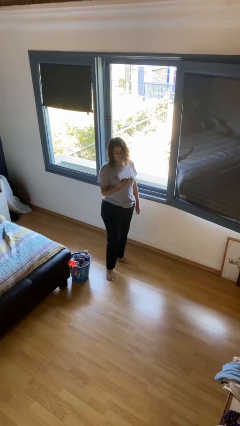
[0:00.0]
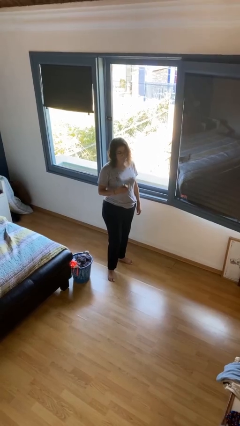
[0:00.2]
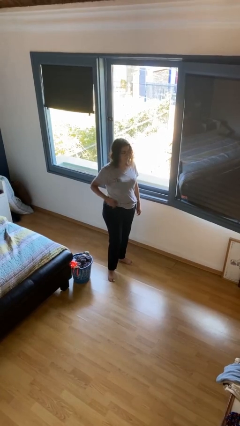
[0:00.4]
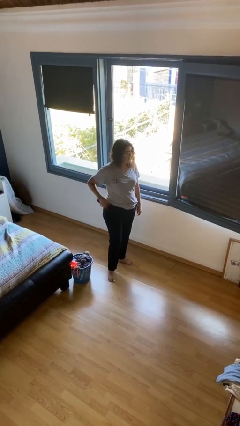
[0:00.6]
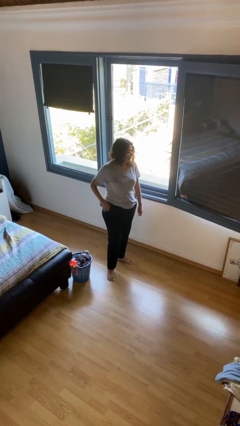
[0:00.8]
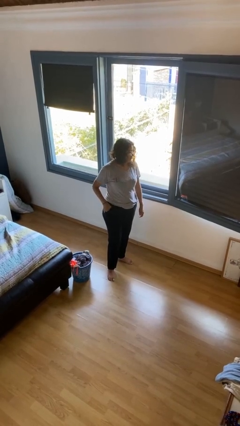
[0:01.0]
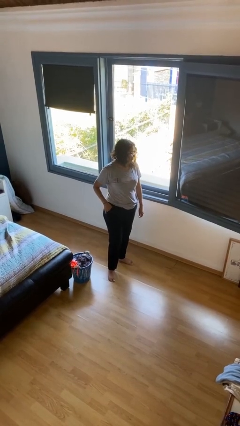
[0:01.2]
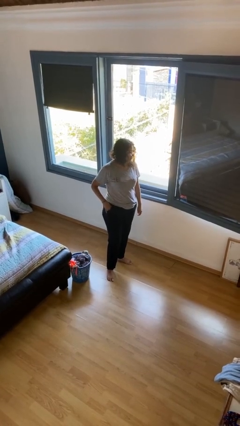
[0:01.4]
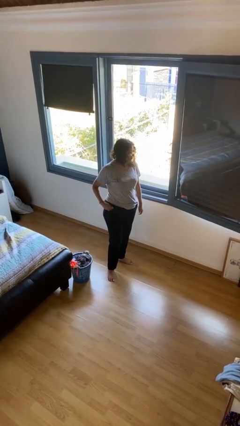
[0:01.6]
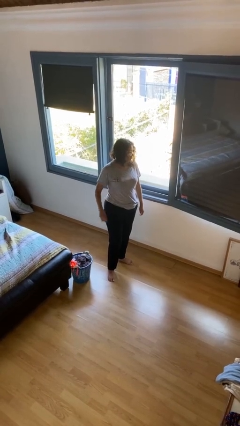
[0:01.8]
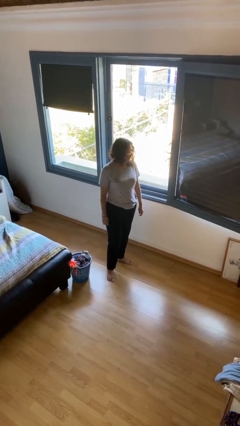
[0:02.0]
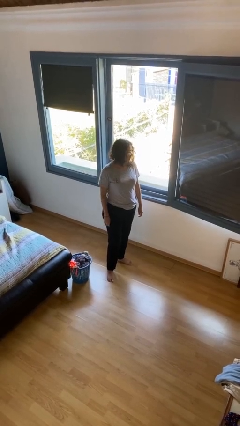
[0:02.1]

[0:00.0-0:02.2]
person puts phone into pocket

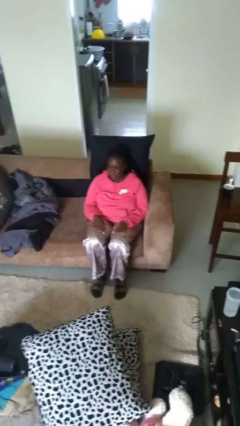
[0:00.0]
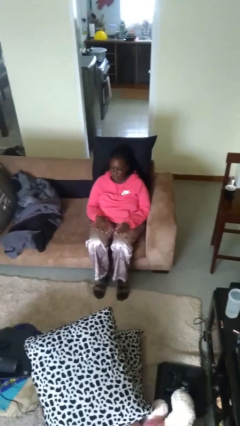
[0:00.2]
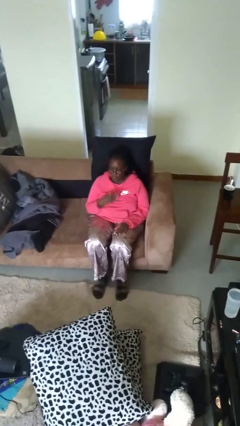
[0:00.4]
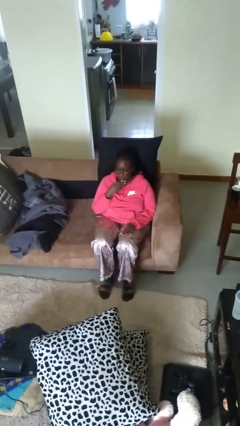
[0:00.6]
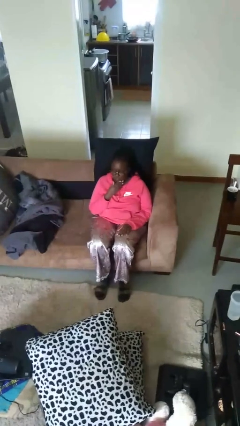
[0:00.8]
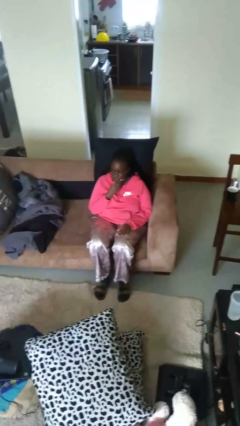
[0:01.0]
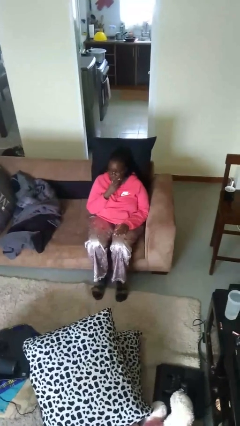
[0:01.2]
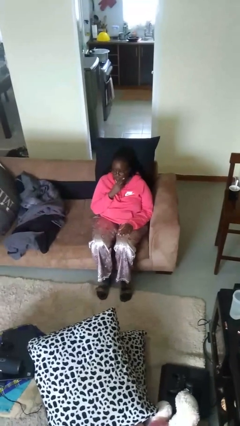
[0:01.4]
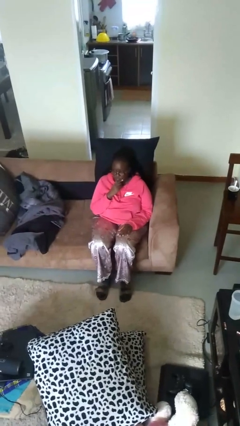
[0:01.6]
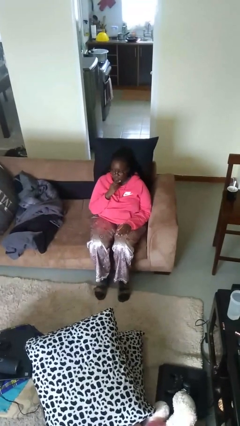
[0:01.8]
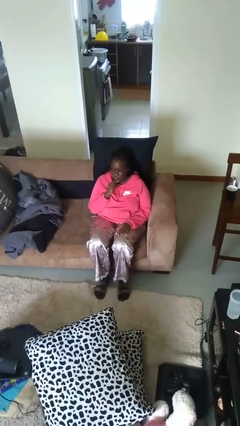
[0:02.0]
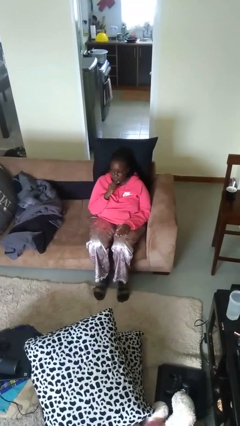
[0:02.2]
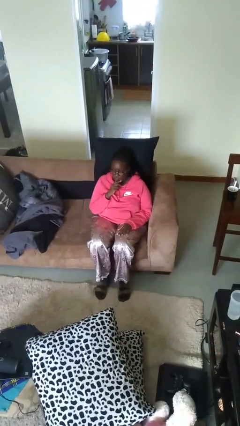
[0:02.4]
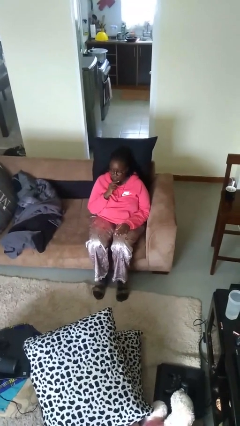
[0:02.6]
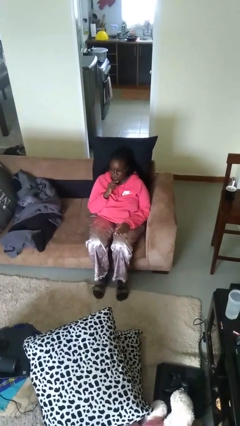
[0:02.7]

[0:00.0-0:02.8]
person strokes chin

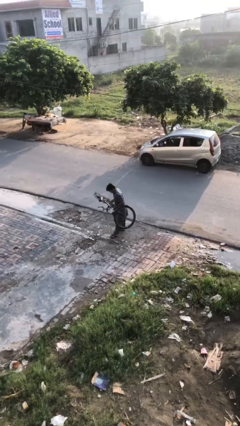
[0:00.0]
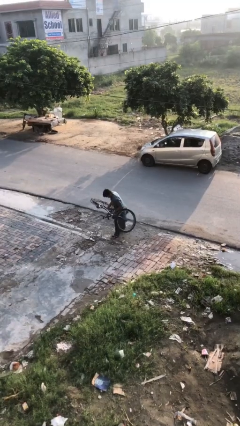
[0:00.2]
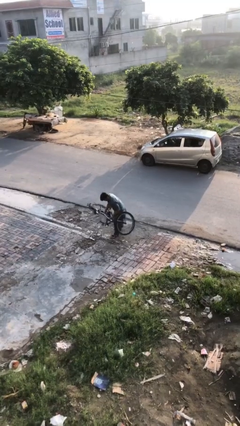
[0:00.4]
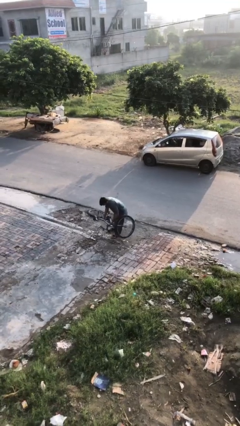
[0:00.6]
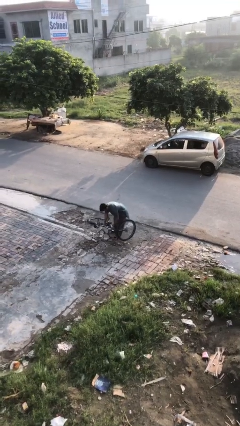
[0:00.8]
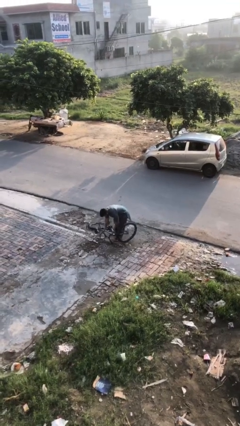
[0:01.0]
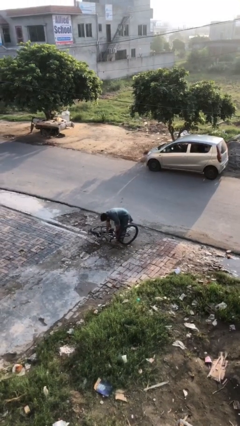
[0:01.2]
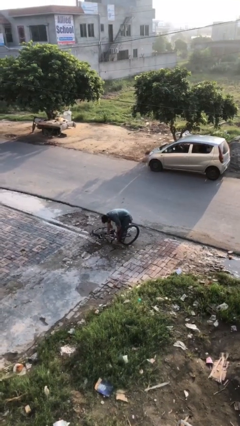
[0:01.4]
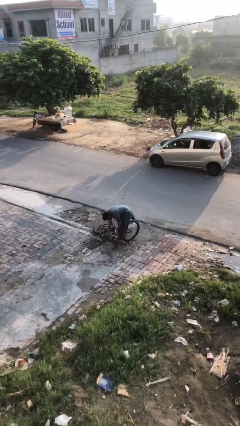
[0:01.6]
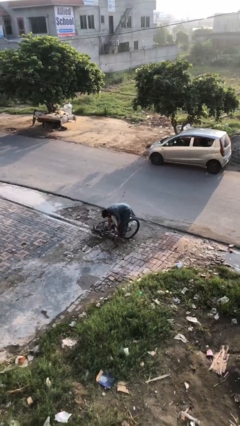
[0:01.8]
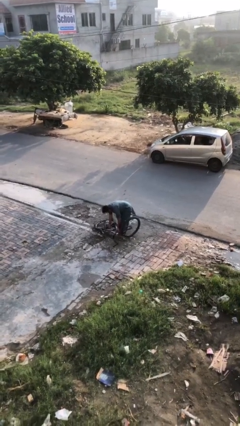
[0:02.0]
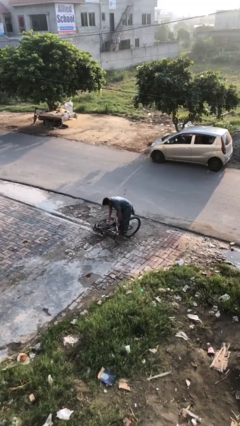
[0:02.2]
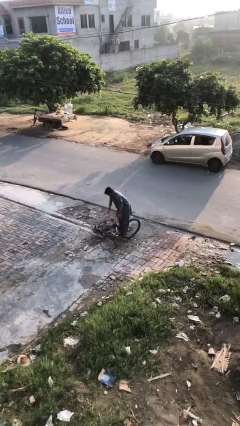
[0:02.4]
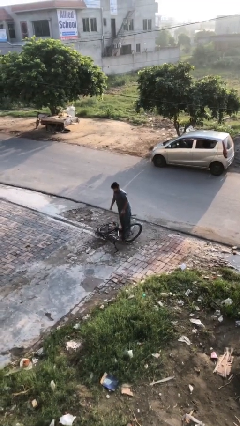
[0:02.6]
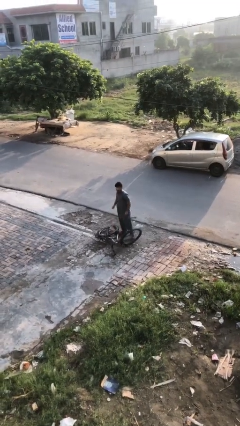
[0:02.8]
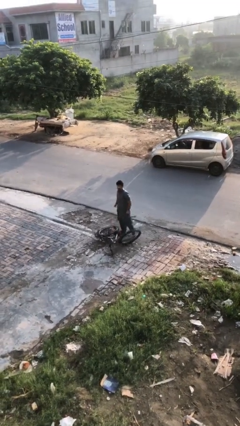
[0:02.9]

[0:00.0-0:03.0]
person puts down object on floor

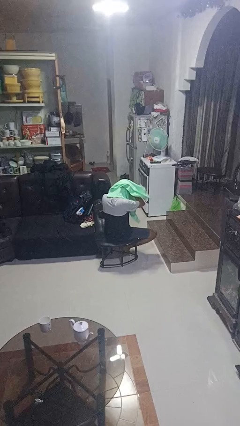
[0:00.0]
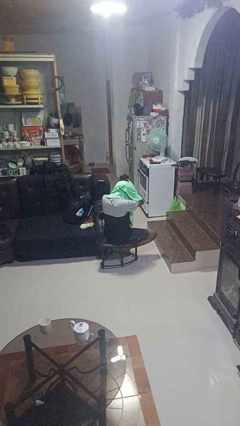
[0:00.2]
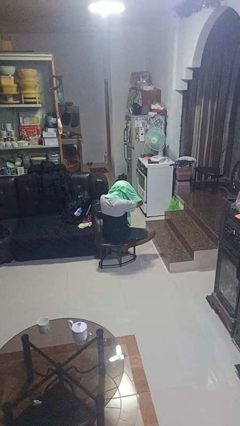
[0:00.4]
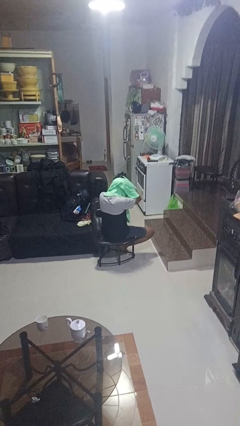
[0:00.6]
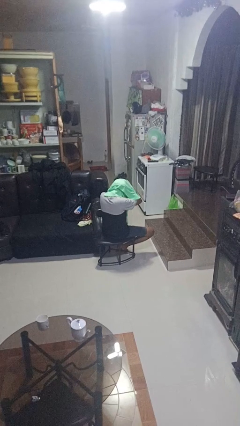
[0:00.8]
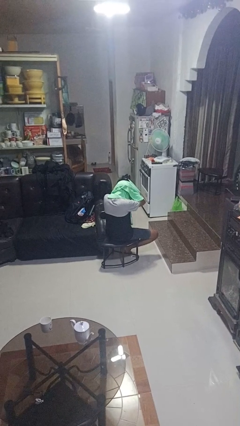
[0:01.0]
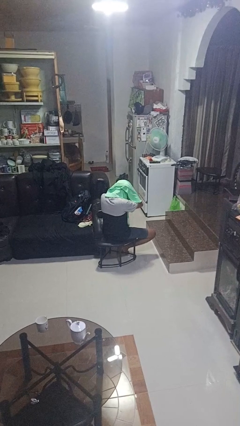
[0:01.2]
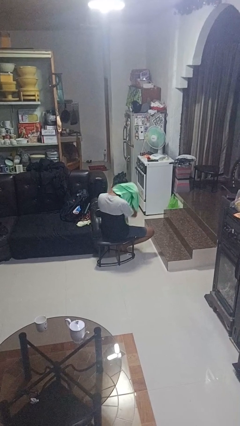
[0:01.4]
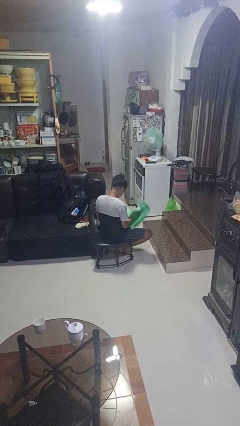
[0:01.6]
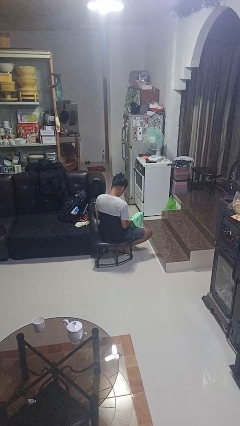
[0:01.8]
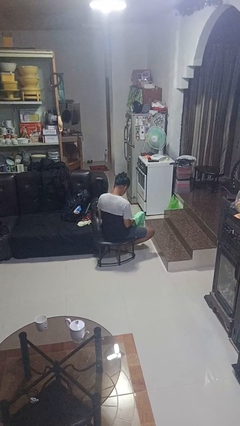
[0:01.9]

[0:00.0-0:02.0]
person dries hair with towel

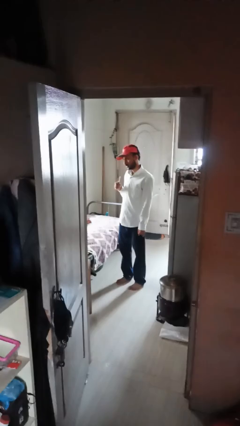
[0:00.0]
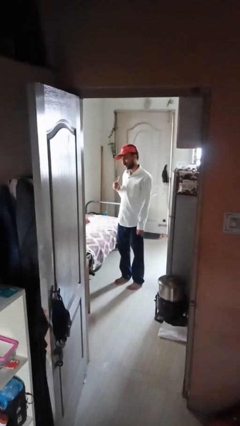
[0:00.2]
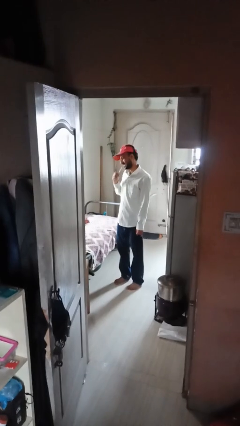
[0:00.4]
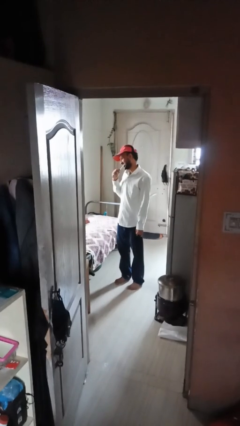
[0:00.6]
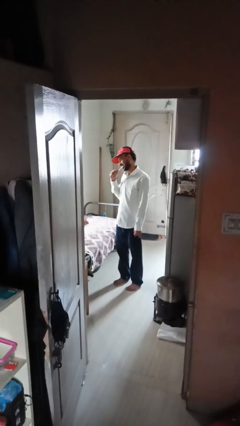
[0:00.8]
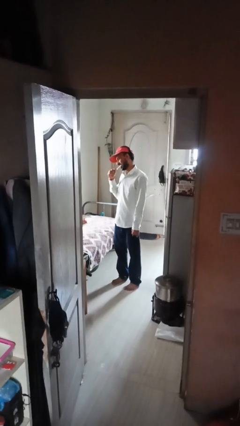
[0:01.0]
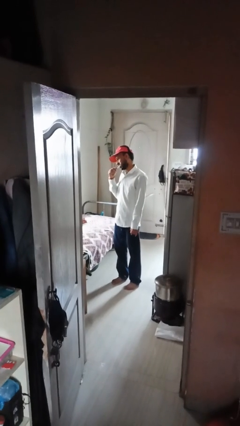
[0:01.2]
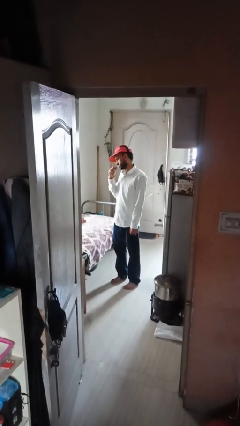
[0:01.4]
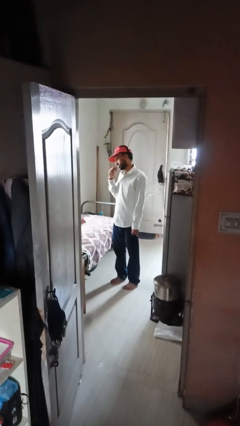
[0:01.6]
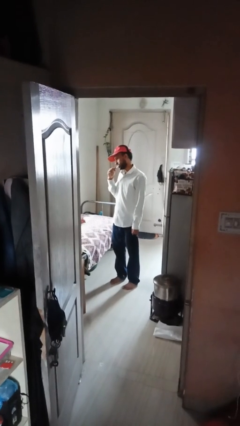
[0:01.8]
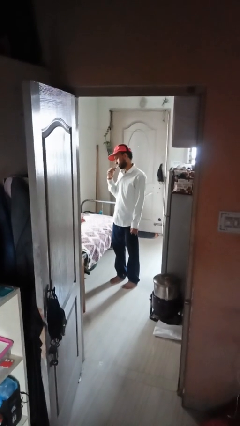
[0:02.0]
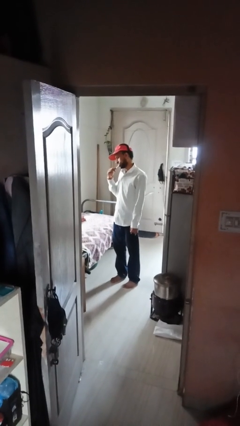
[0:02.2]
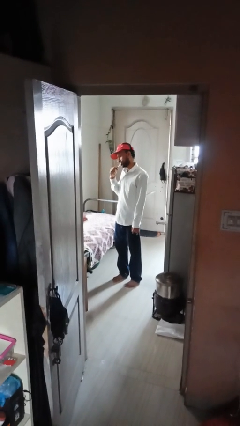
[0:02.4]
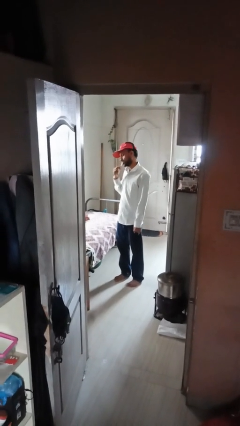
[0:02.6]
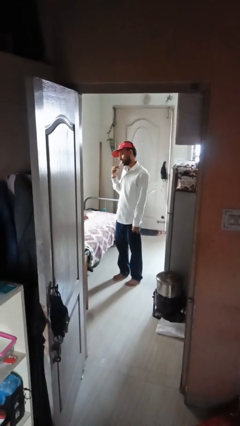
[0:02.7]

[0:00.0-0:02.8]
person brushes teeth

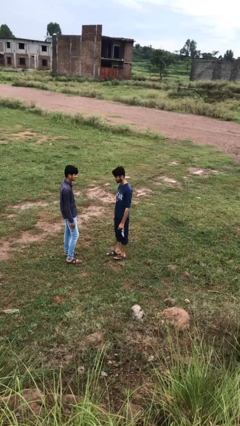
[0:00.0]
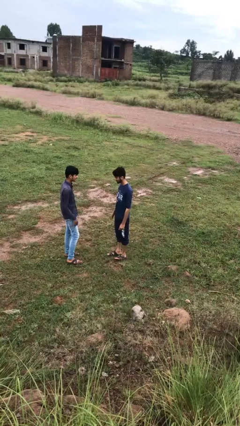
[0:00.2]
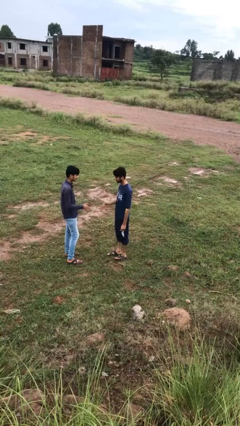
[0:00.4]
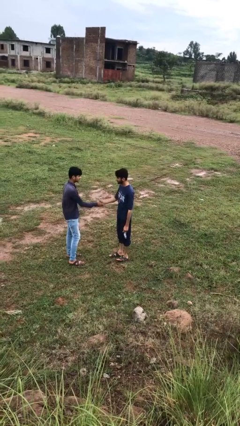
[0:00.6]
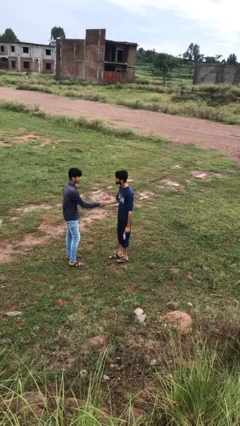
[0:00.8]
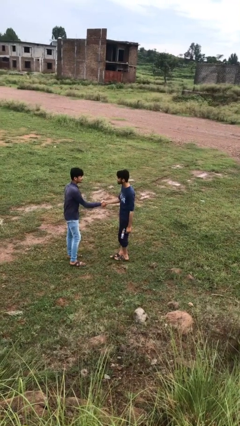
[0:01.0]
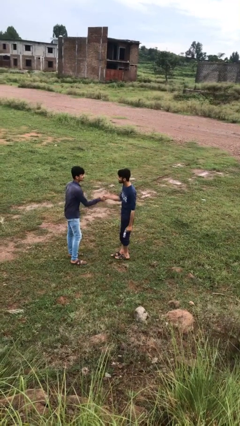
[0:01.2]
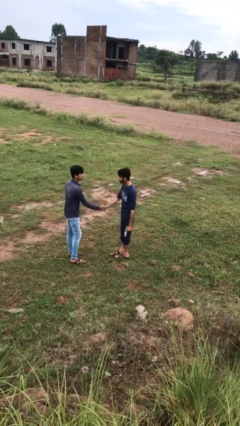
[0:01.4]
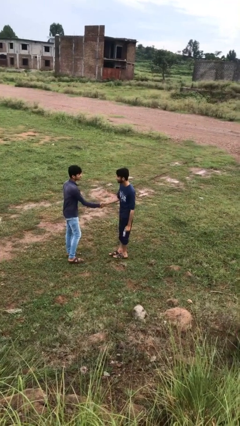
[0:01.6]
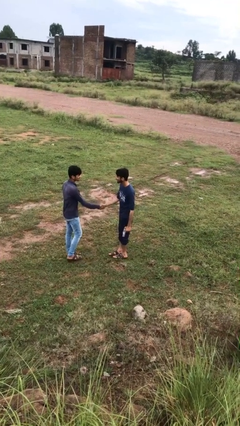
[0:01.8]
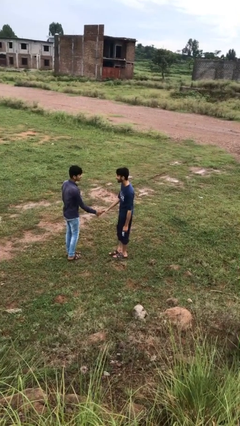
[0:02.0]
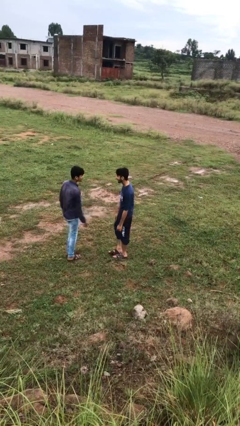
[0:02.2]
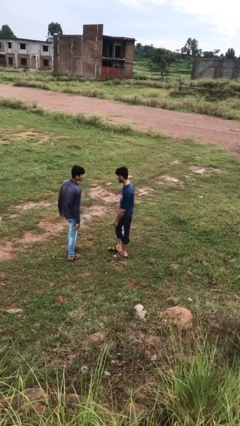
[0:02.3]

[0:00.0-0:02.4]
person shakes hand

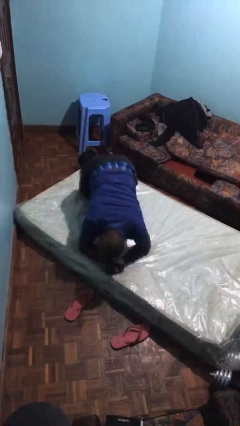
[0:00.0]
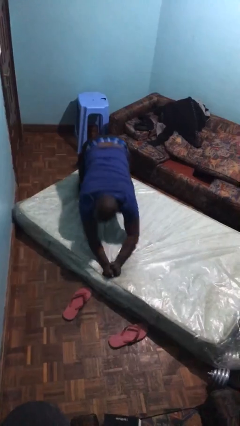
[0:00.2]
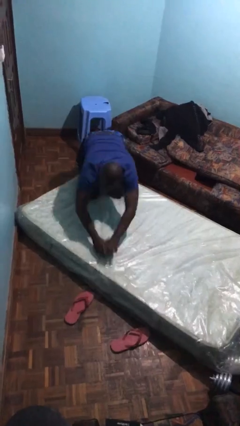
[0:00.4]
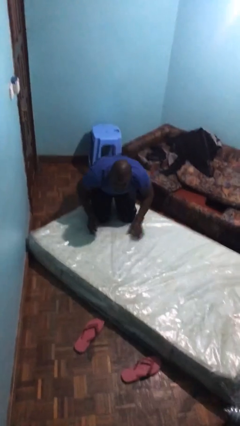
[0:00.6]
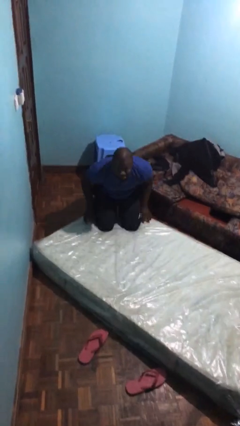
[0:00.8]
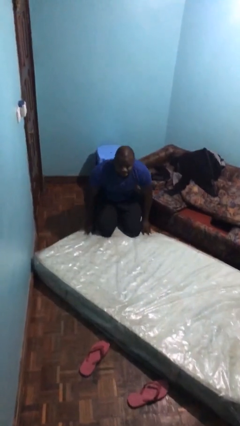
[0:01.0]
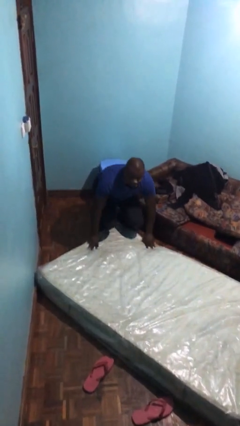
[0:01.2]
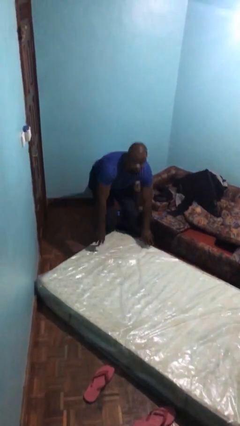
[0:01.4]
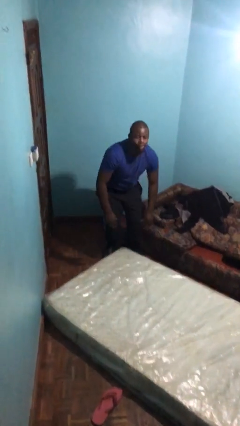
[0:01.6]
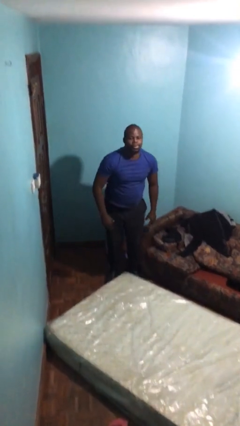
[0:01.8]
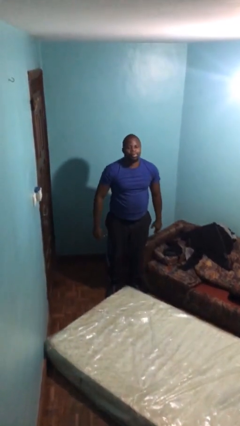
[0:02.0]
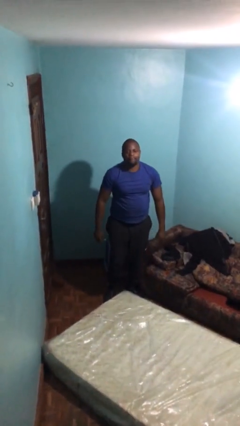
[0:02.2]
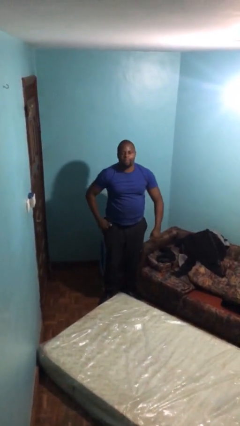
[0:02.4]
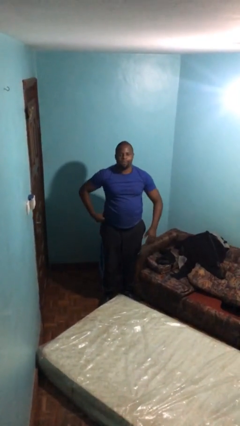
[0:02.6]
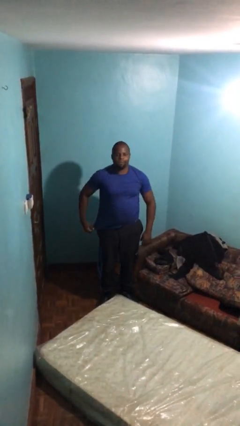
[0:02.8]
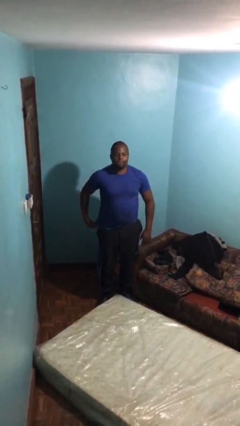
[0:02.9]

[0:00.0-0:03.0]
person stands up
